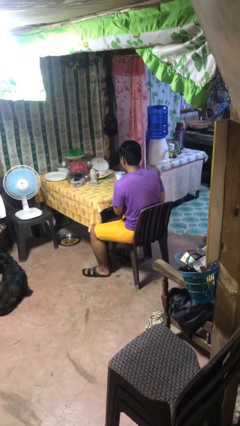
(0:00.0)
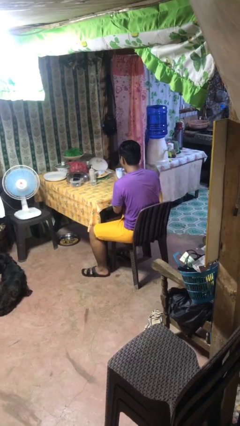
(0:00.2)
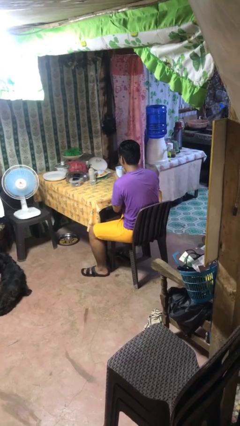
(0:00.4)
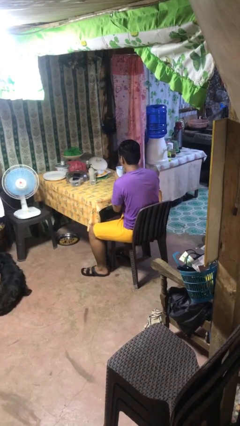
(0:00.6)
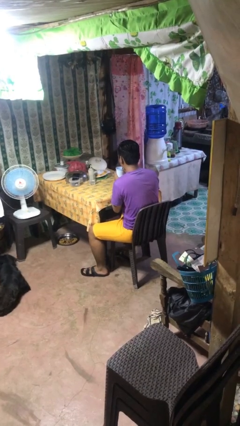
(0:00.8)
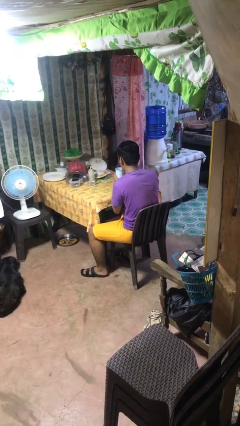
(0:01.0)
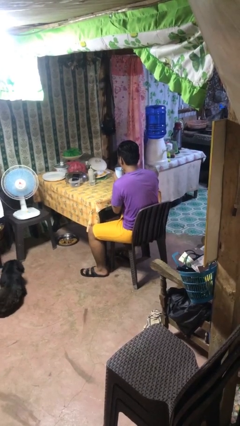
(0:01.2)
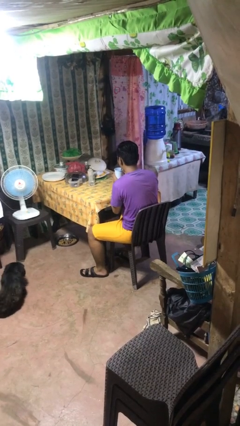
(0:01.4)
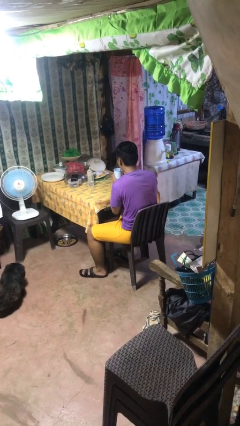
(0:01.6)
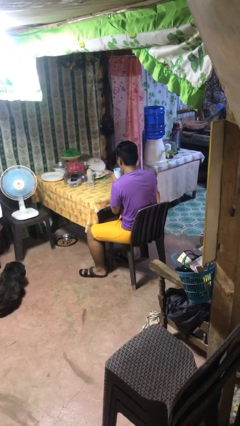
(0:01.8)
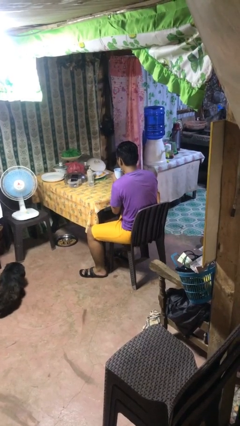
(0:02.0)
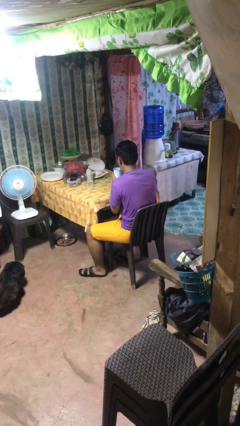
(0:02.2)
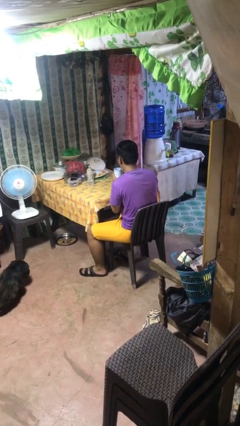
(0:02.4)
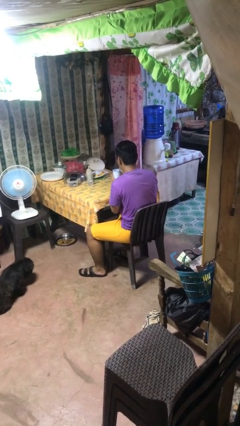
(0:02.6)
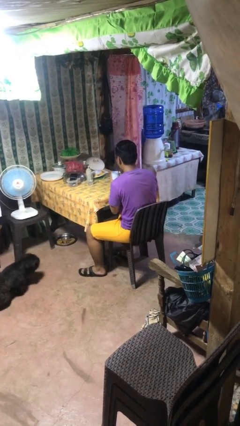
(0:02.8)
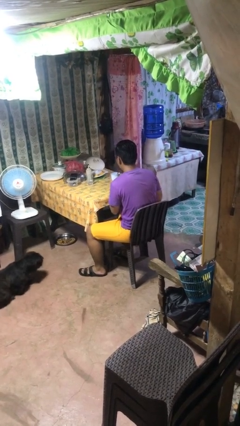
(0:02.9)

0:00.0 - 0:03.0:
person drinks from straw

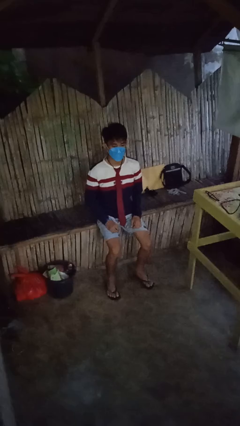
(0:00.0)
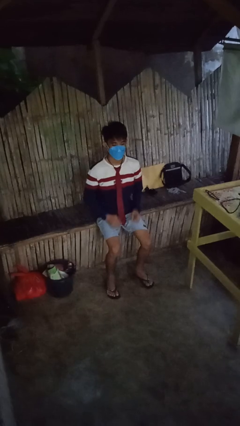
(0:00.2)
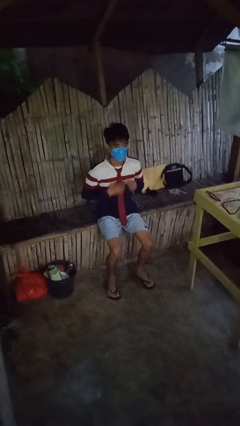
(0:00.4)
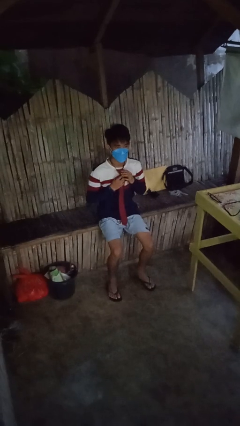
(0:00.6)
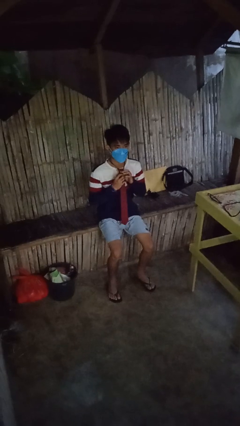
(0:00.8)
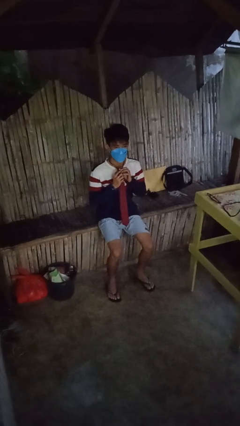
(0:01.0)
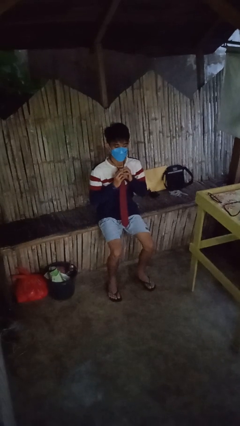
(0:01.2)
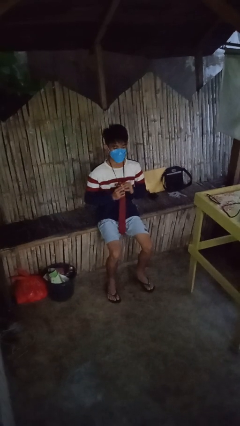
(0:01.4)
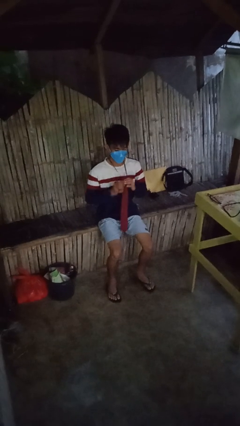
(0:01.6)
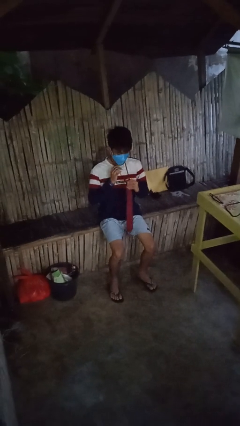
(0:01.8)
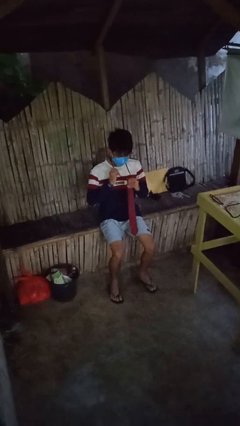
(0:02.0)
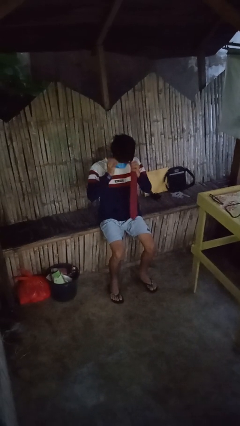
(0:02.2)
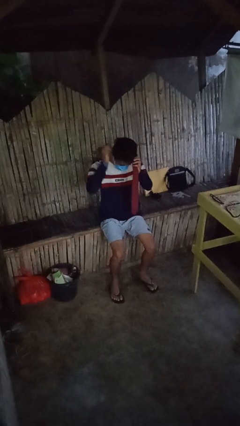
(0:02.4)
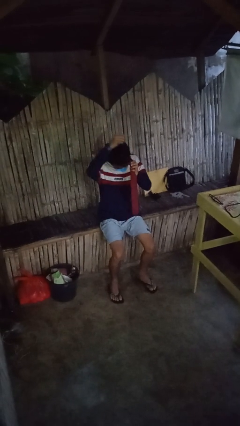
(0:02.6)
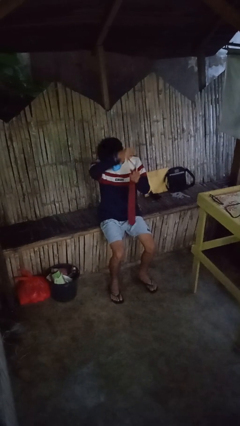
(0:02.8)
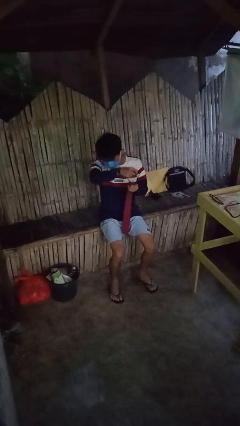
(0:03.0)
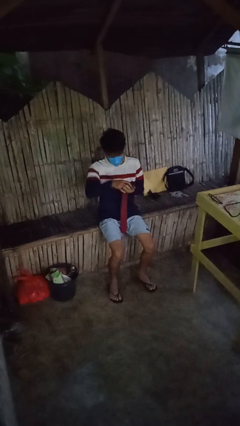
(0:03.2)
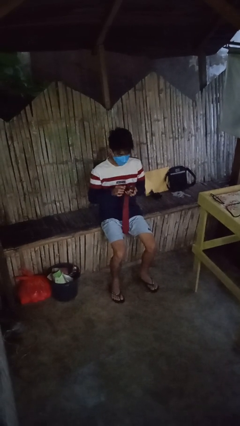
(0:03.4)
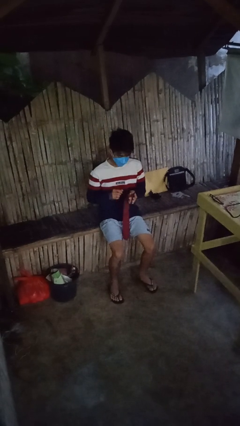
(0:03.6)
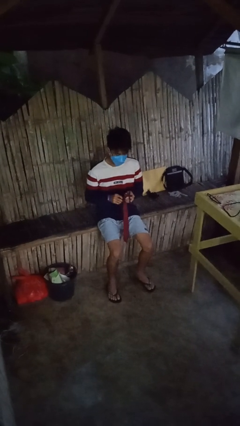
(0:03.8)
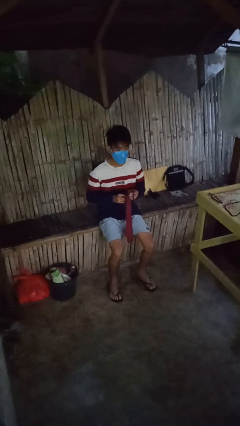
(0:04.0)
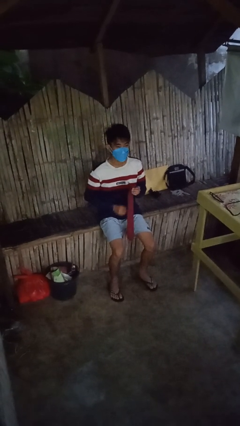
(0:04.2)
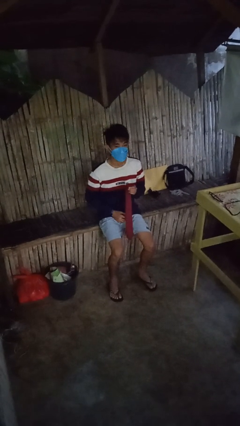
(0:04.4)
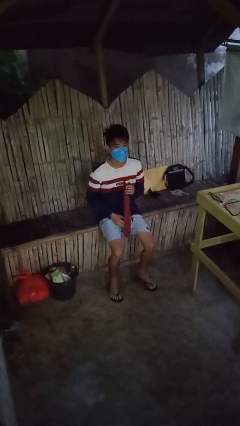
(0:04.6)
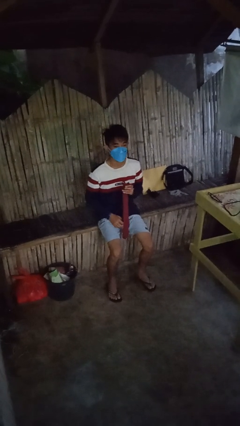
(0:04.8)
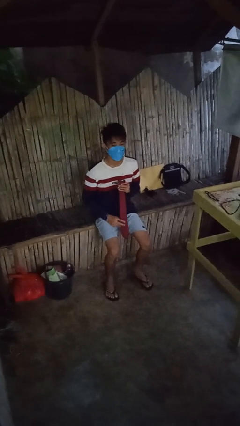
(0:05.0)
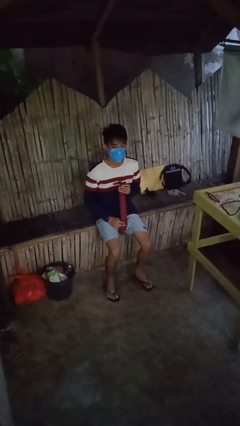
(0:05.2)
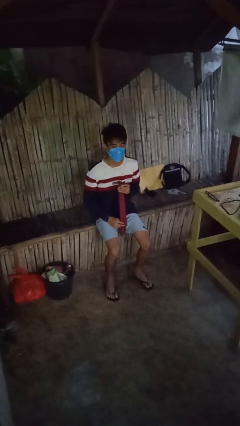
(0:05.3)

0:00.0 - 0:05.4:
person takes off necktie

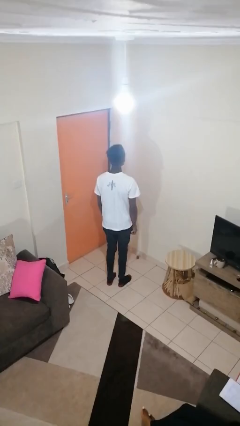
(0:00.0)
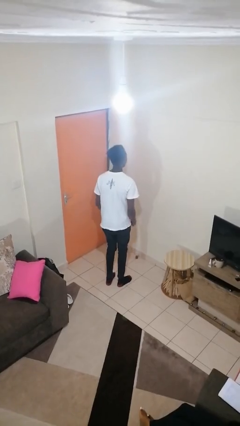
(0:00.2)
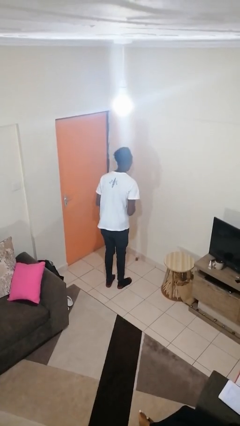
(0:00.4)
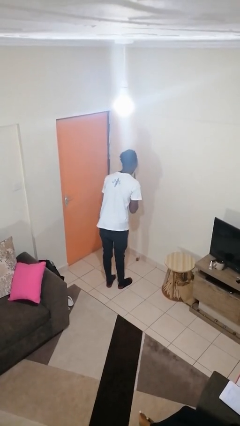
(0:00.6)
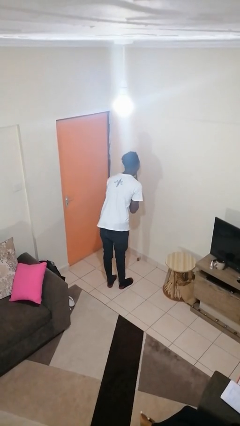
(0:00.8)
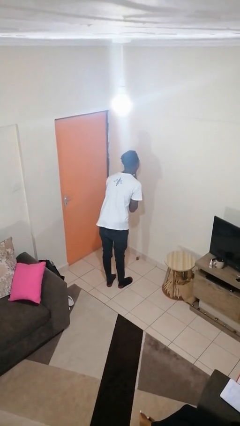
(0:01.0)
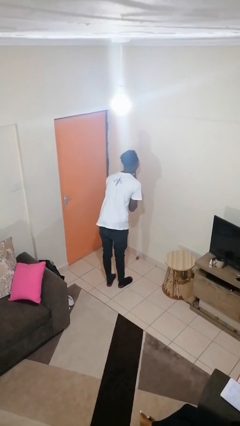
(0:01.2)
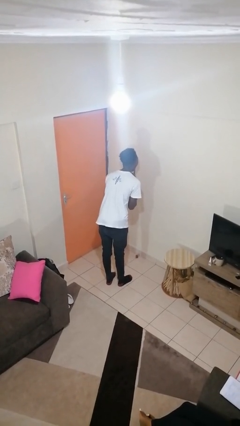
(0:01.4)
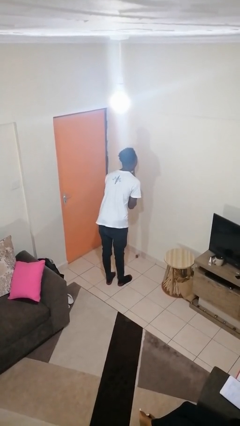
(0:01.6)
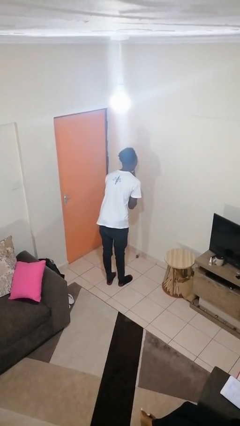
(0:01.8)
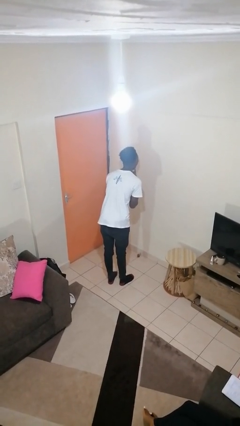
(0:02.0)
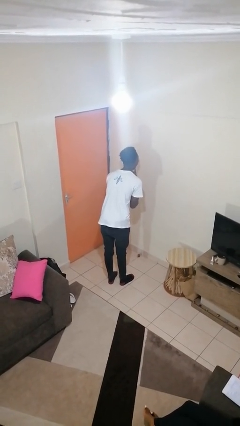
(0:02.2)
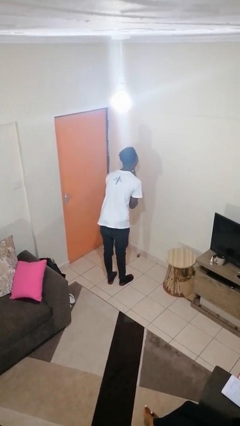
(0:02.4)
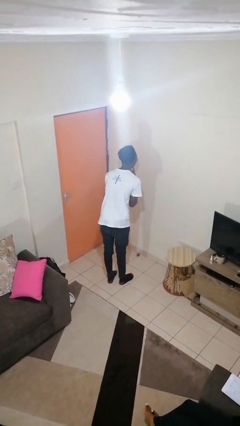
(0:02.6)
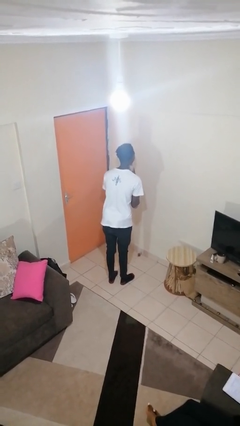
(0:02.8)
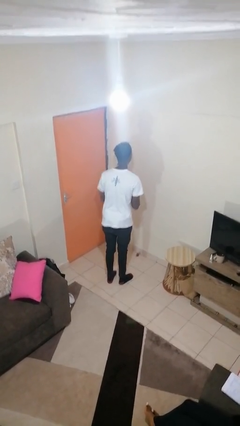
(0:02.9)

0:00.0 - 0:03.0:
person sticks out tongue

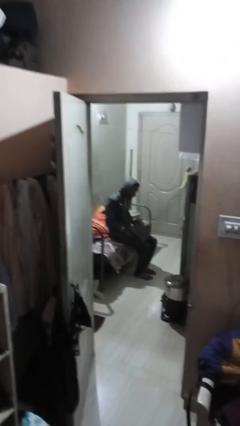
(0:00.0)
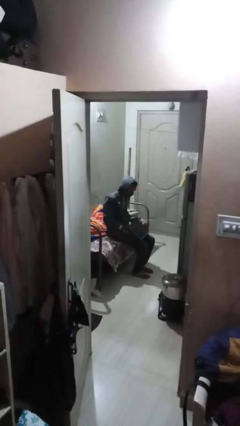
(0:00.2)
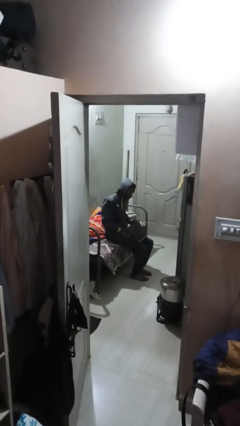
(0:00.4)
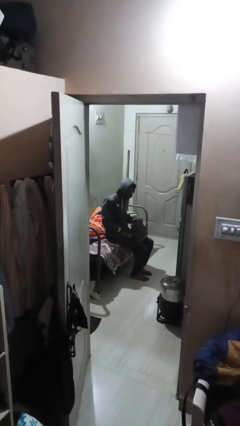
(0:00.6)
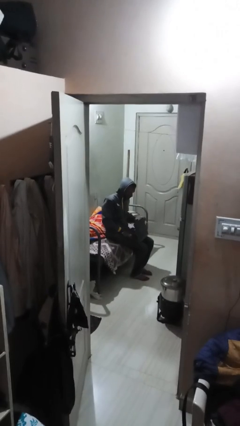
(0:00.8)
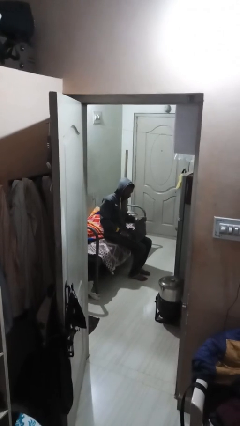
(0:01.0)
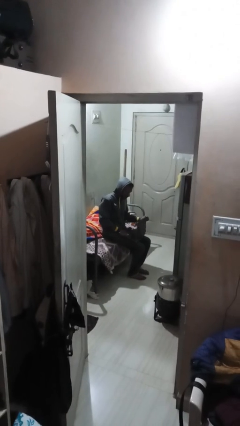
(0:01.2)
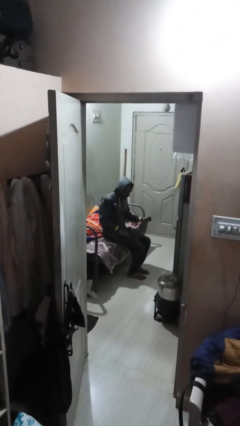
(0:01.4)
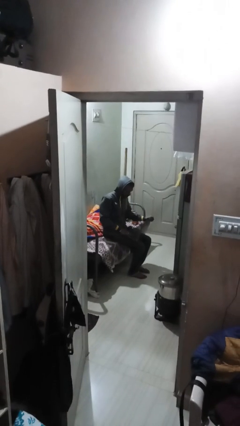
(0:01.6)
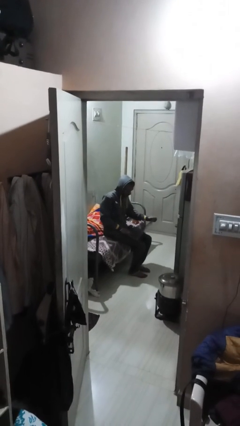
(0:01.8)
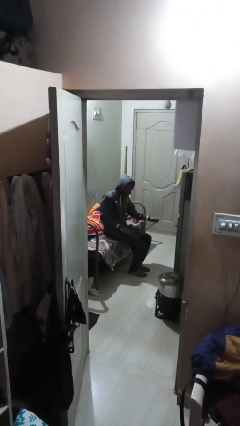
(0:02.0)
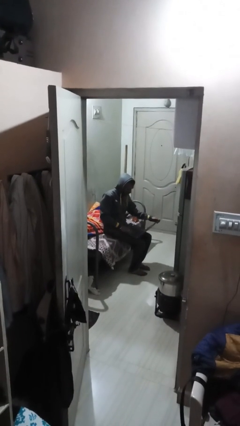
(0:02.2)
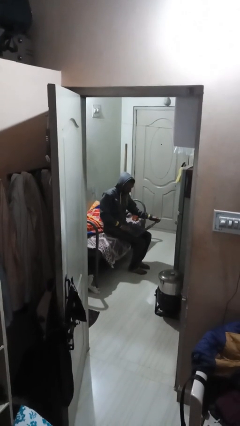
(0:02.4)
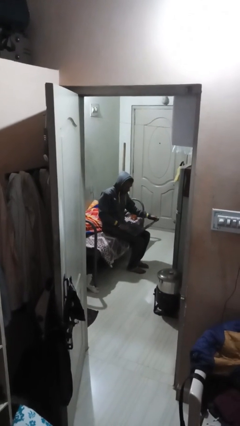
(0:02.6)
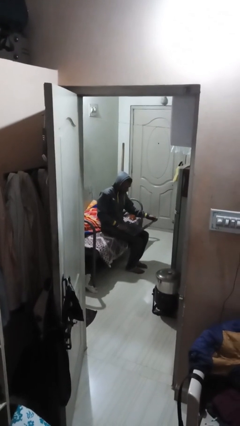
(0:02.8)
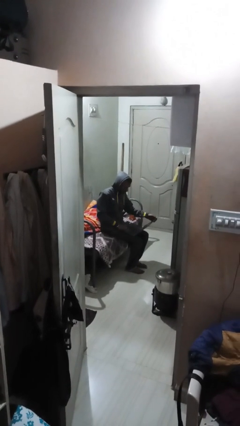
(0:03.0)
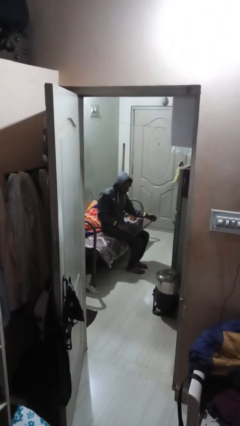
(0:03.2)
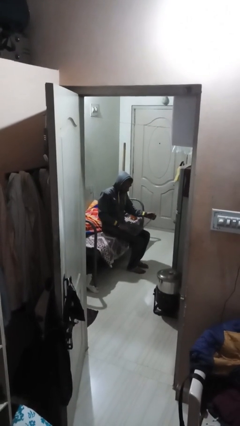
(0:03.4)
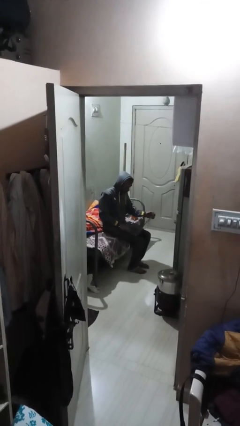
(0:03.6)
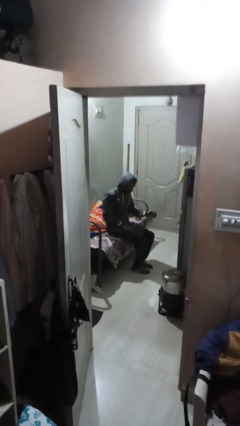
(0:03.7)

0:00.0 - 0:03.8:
person interacts with laptop

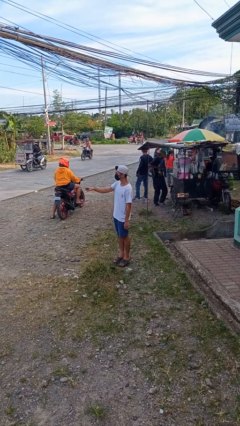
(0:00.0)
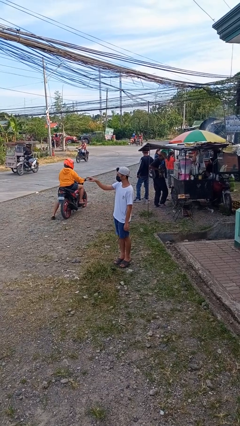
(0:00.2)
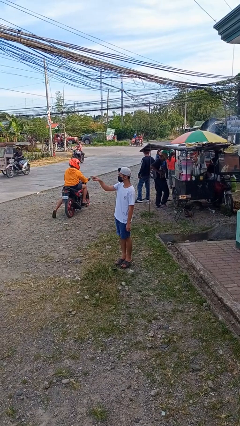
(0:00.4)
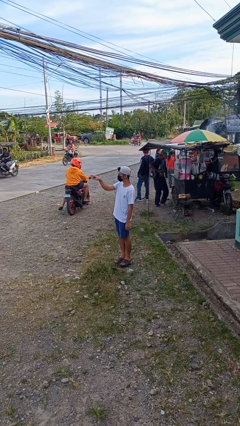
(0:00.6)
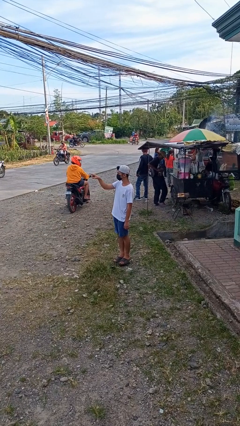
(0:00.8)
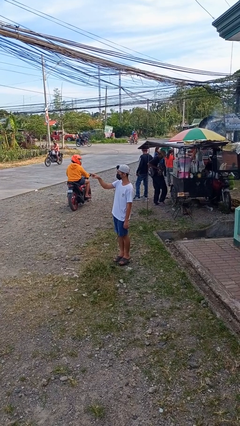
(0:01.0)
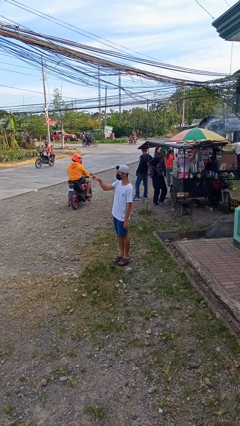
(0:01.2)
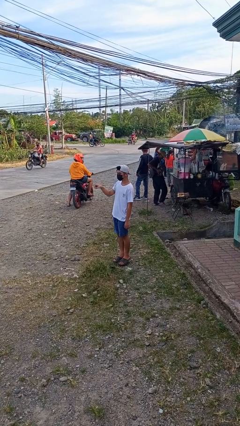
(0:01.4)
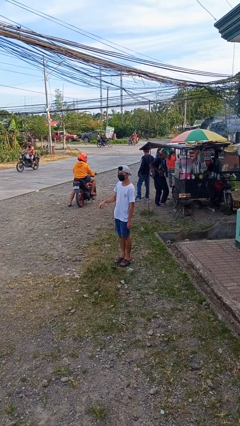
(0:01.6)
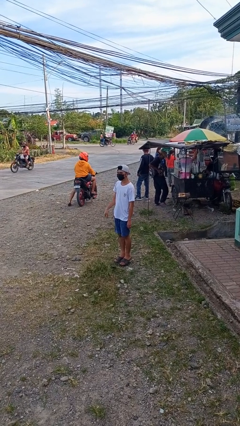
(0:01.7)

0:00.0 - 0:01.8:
person points at person

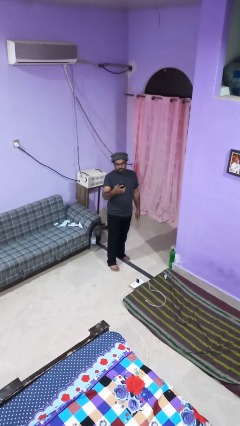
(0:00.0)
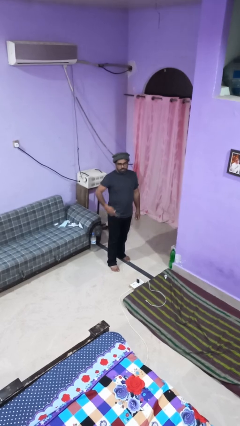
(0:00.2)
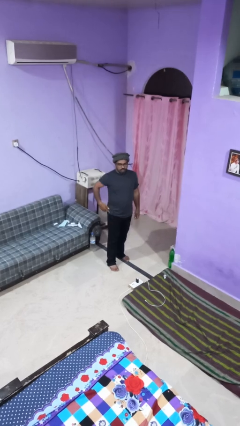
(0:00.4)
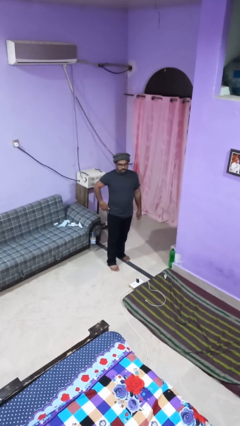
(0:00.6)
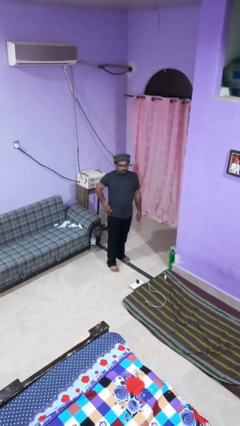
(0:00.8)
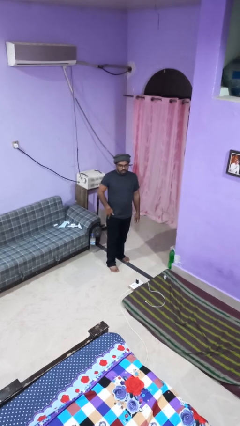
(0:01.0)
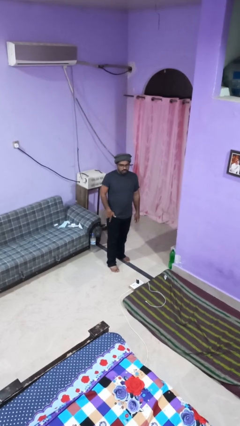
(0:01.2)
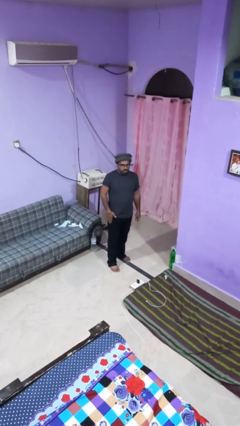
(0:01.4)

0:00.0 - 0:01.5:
person puts phone into pocket
